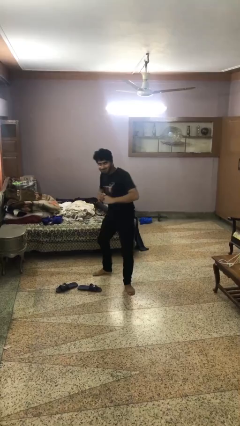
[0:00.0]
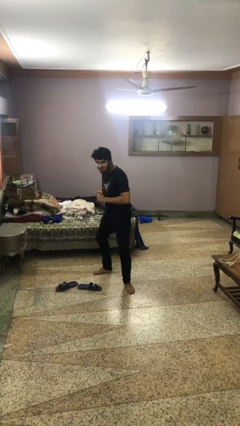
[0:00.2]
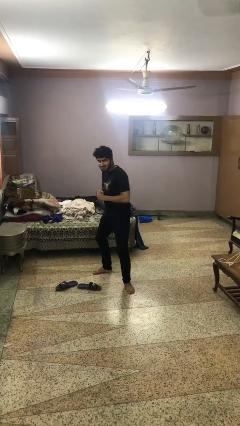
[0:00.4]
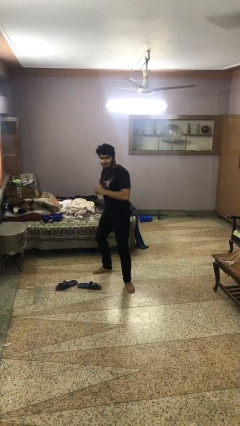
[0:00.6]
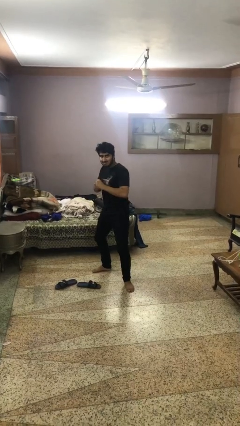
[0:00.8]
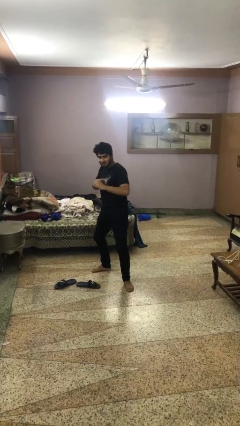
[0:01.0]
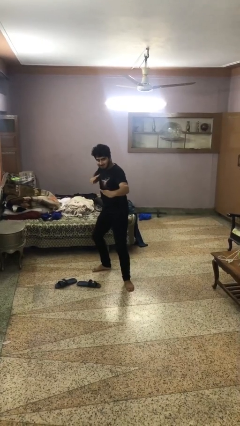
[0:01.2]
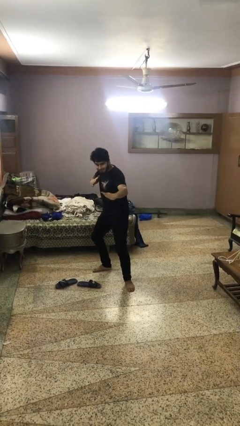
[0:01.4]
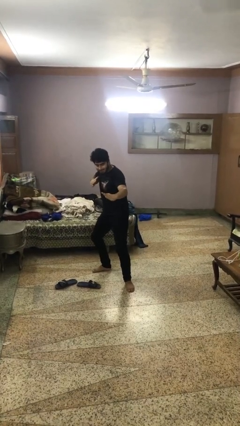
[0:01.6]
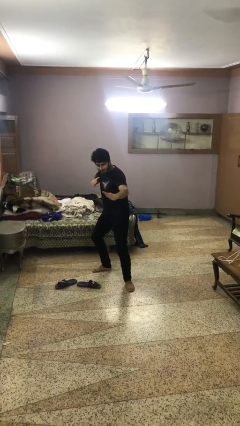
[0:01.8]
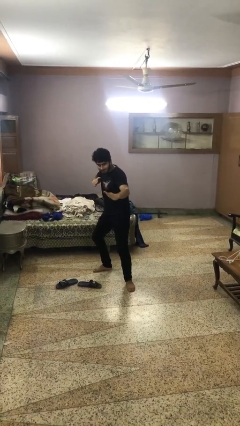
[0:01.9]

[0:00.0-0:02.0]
person karate chop

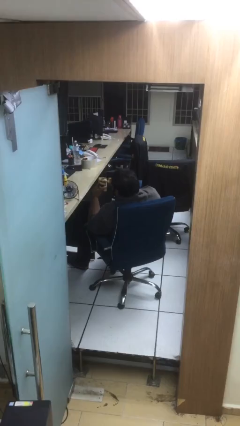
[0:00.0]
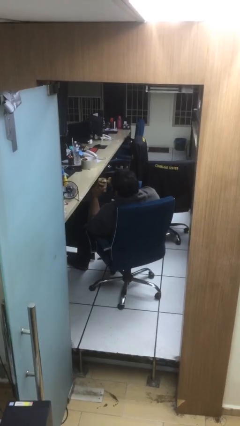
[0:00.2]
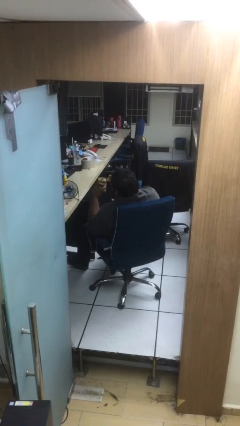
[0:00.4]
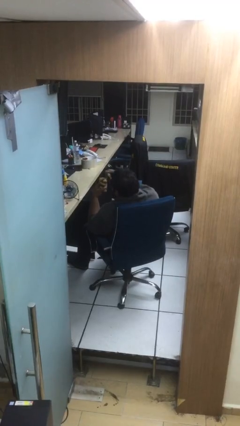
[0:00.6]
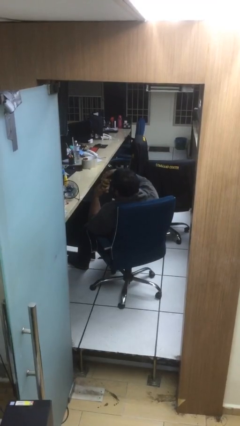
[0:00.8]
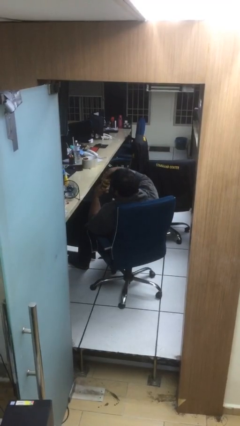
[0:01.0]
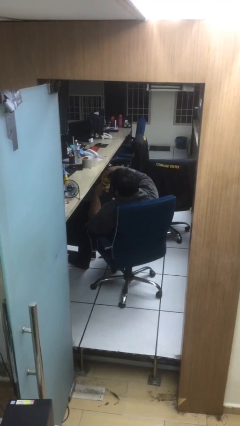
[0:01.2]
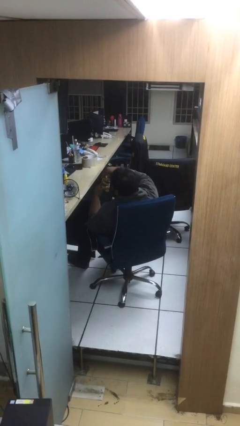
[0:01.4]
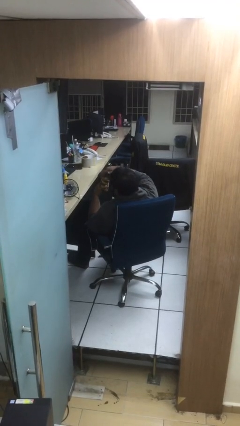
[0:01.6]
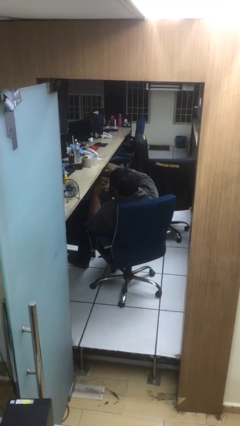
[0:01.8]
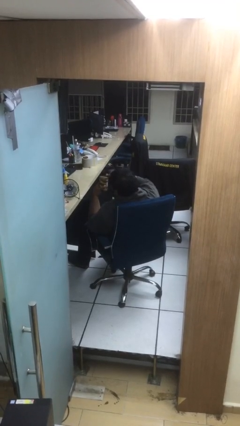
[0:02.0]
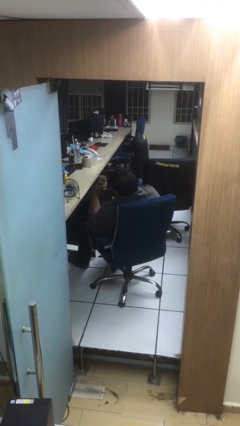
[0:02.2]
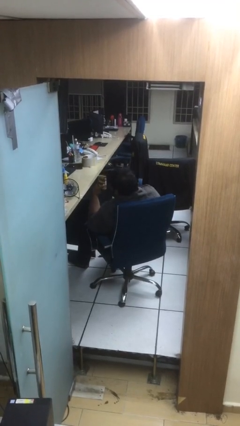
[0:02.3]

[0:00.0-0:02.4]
person closes jar

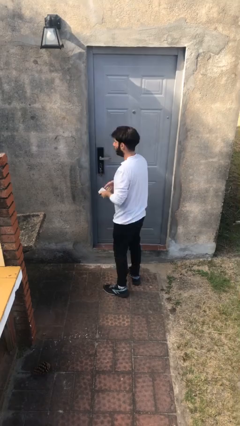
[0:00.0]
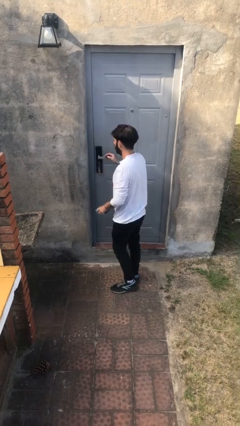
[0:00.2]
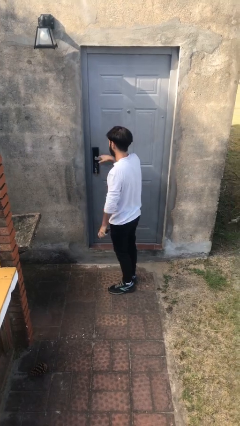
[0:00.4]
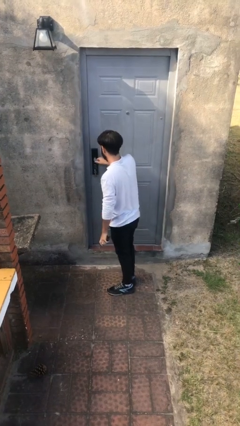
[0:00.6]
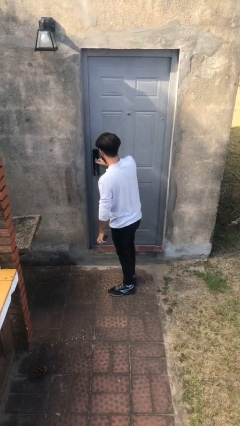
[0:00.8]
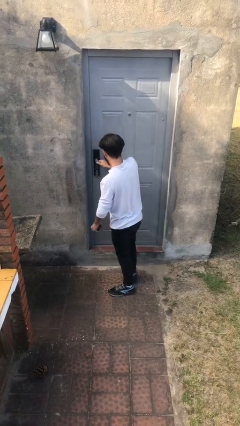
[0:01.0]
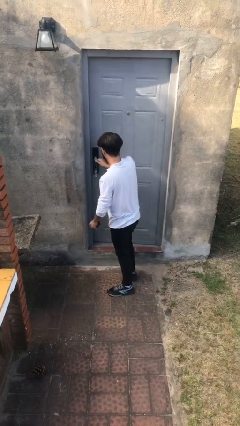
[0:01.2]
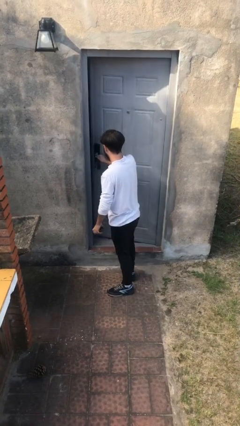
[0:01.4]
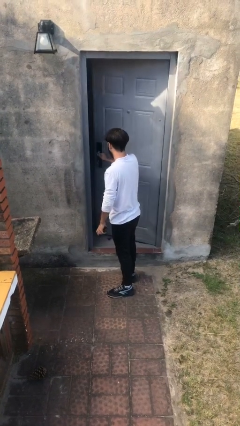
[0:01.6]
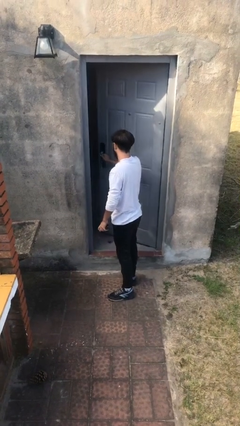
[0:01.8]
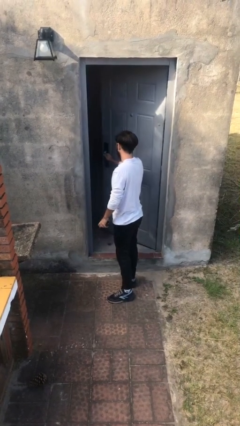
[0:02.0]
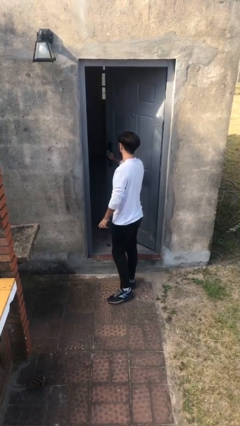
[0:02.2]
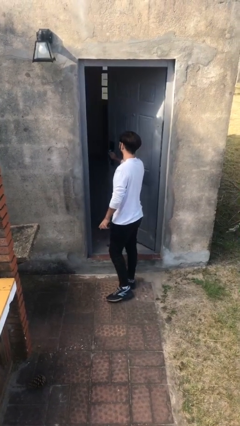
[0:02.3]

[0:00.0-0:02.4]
person opens facility door

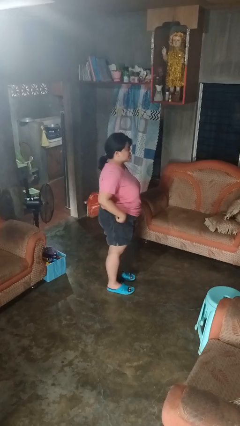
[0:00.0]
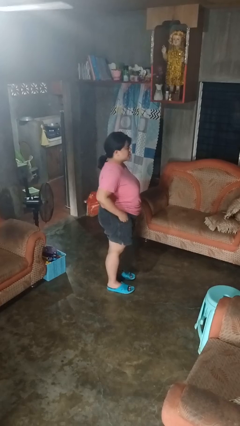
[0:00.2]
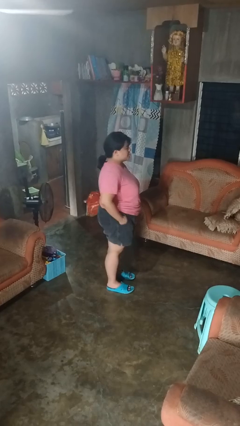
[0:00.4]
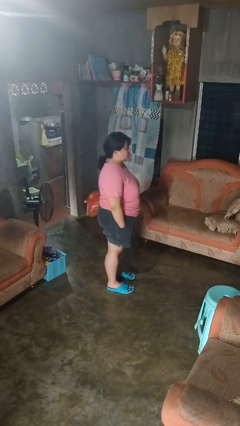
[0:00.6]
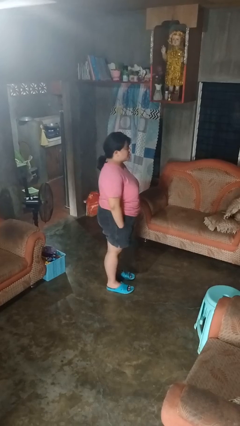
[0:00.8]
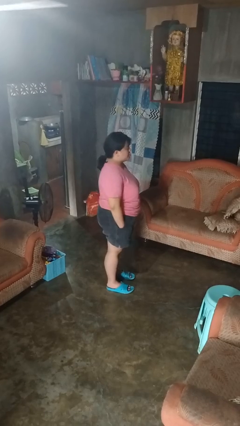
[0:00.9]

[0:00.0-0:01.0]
person puts hands in back pockets

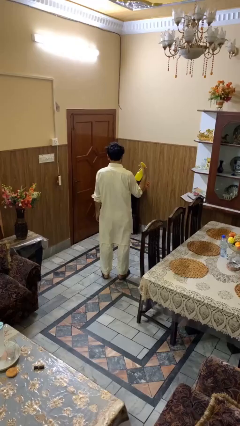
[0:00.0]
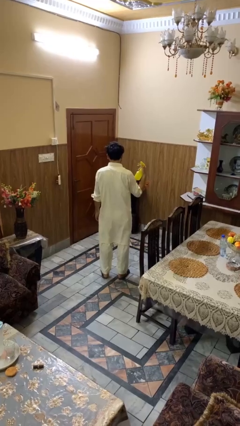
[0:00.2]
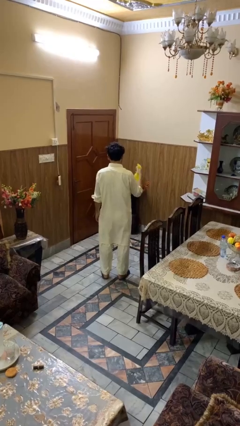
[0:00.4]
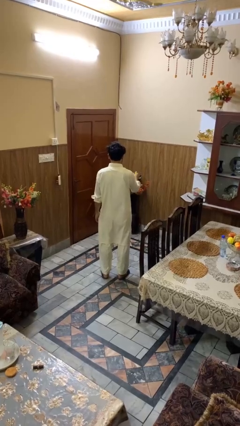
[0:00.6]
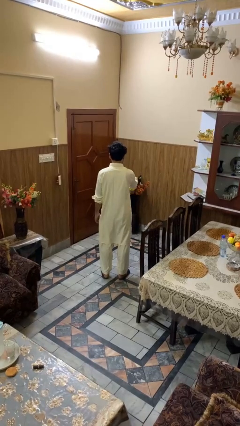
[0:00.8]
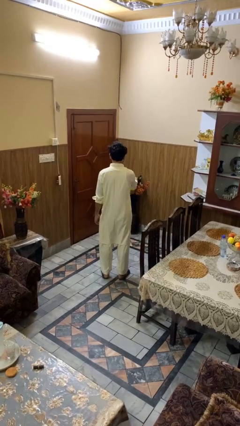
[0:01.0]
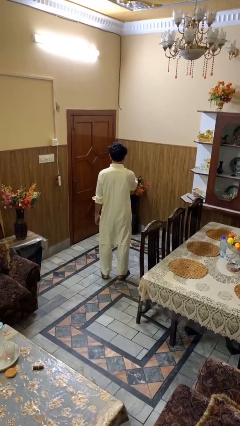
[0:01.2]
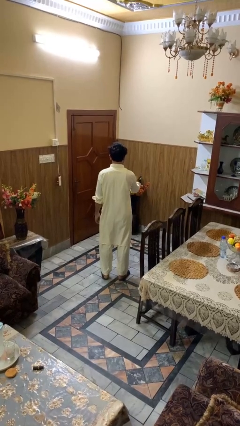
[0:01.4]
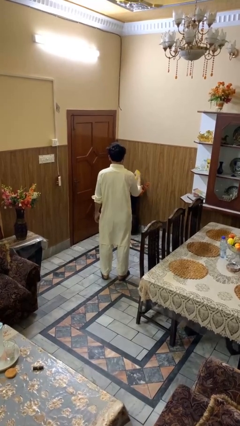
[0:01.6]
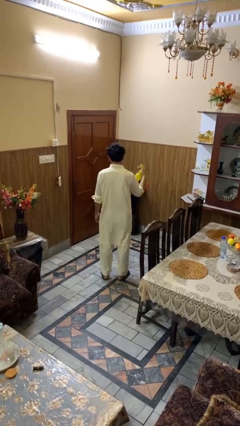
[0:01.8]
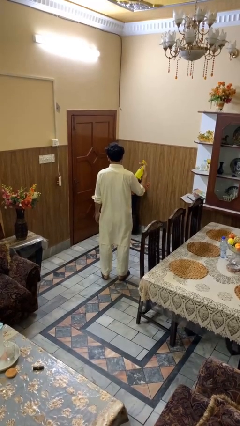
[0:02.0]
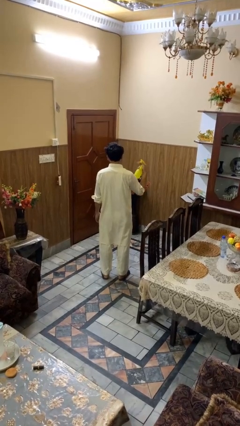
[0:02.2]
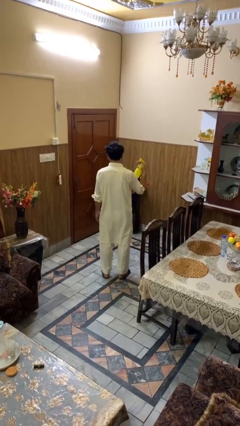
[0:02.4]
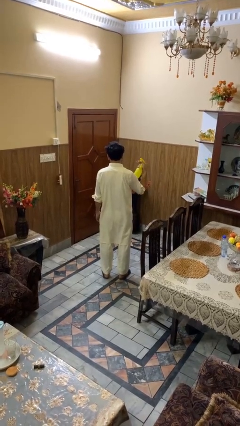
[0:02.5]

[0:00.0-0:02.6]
person sprays from bottle

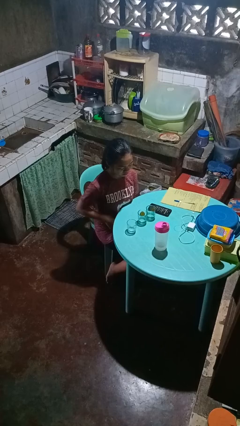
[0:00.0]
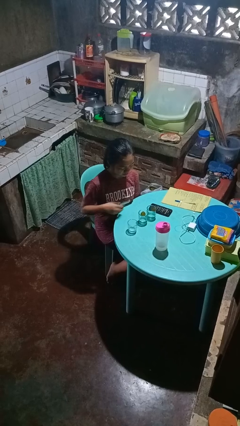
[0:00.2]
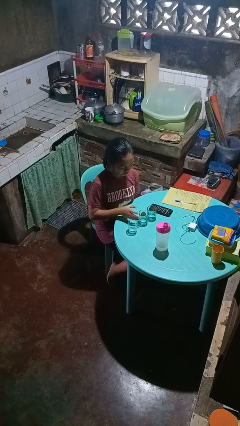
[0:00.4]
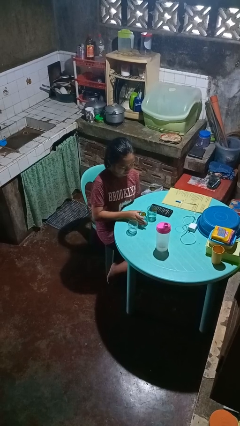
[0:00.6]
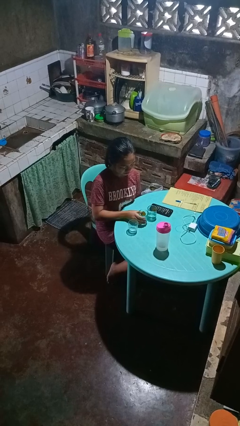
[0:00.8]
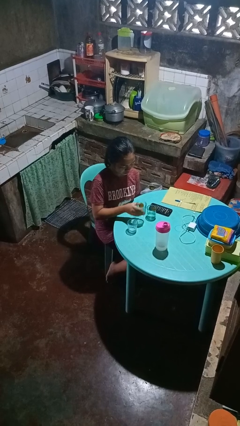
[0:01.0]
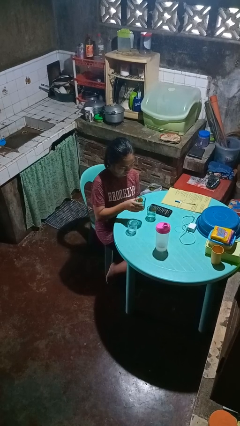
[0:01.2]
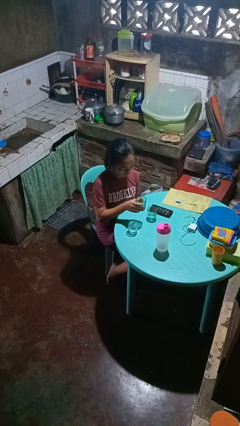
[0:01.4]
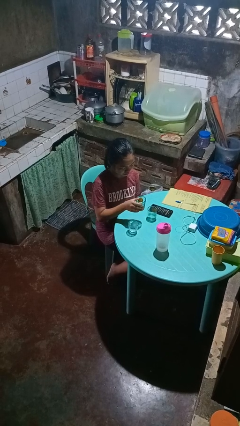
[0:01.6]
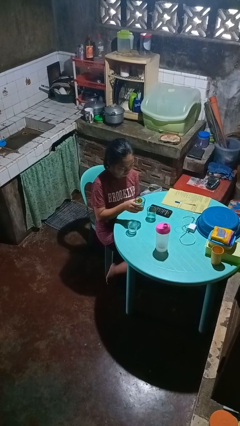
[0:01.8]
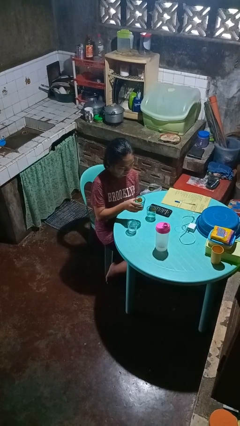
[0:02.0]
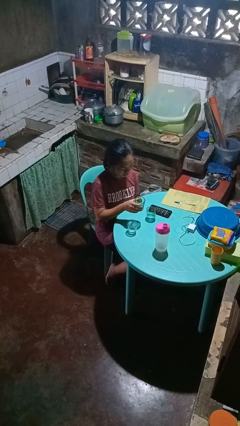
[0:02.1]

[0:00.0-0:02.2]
person picks up object from table

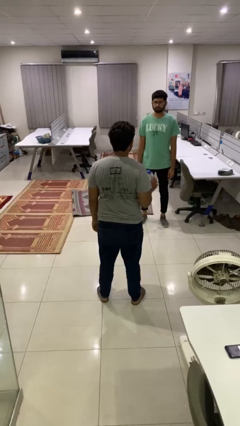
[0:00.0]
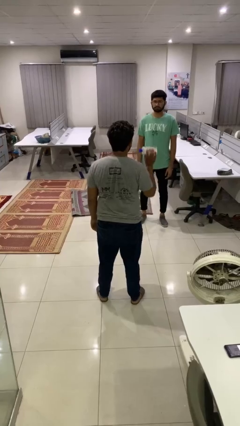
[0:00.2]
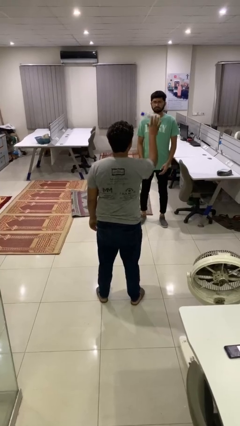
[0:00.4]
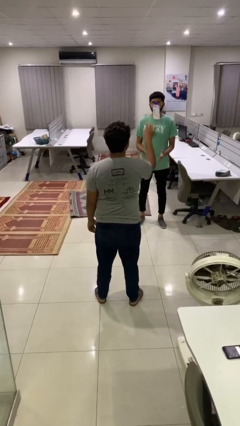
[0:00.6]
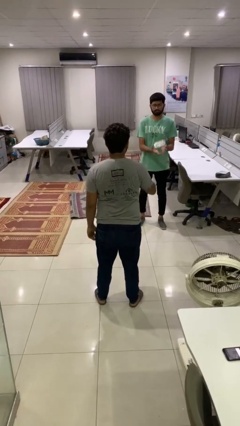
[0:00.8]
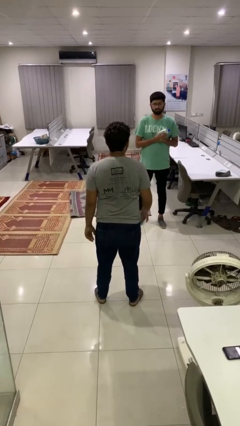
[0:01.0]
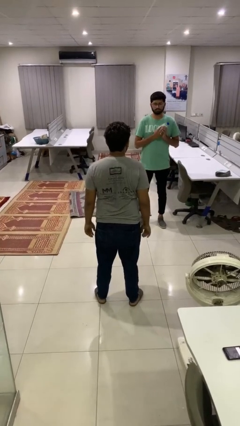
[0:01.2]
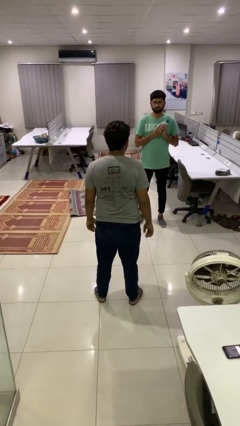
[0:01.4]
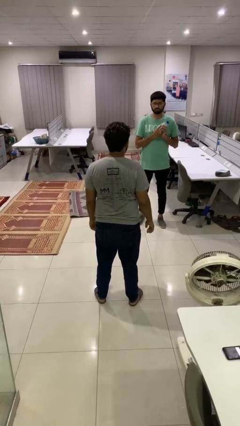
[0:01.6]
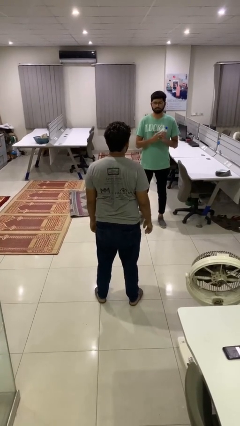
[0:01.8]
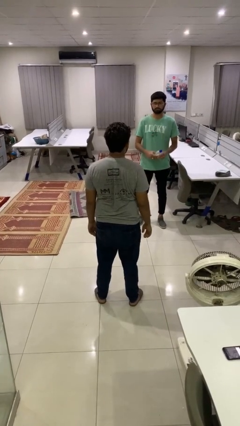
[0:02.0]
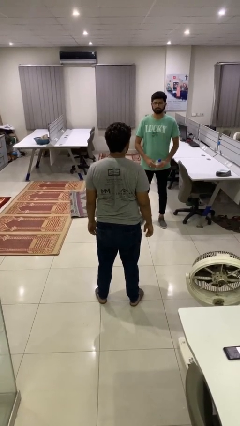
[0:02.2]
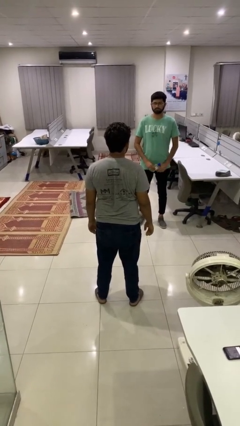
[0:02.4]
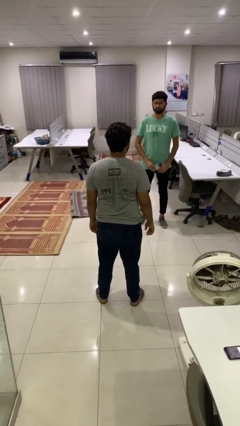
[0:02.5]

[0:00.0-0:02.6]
person throws object to person

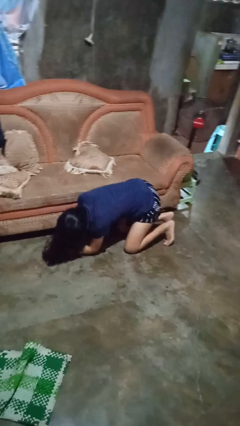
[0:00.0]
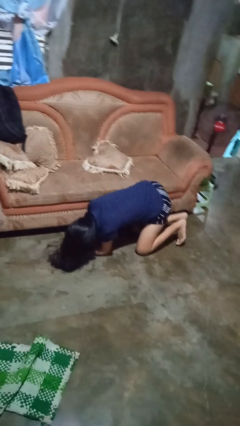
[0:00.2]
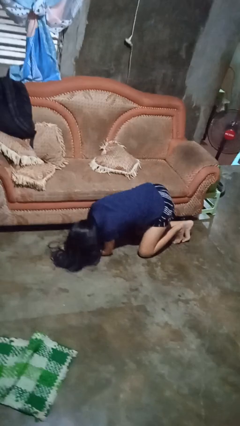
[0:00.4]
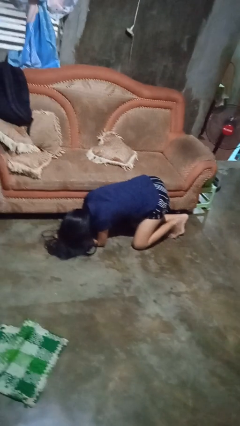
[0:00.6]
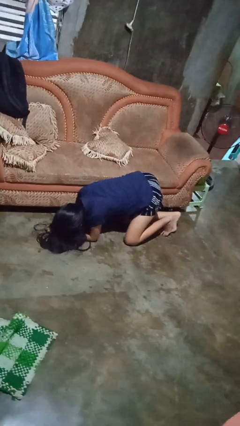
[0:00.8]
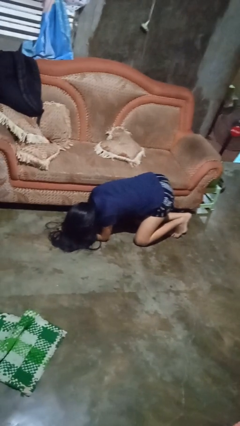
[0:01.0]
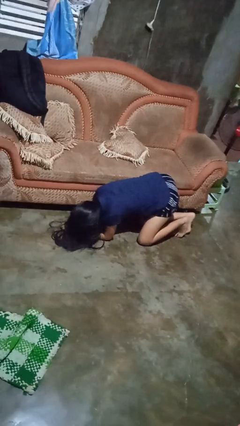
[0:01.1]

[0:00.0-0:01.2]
person searches under couch

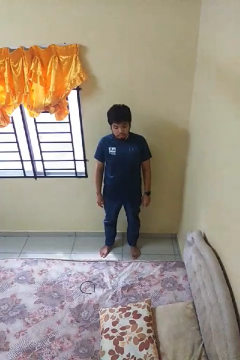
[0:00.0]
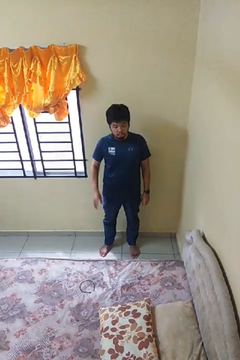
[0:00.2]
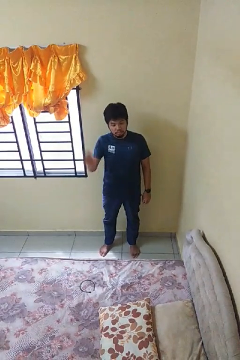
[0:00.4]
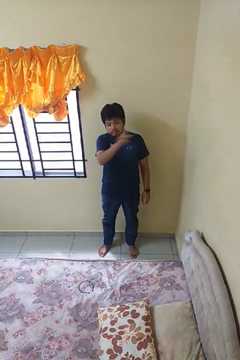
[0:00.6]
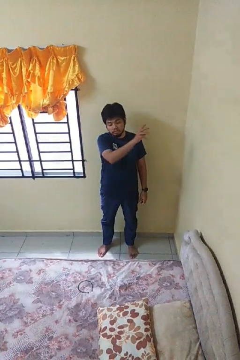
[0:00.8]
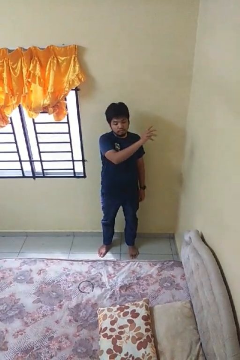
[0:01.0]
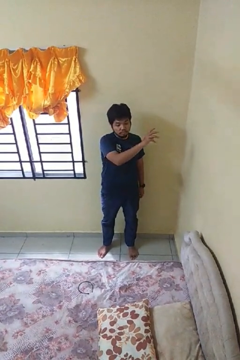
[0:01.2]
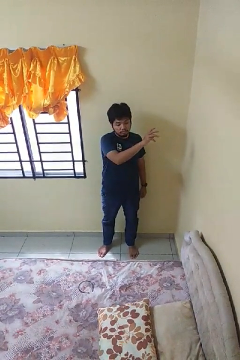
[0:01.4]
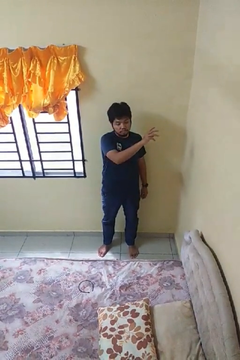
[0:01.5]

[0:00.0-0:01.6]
person gestures swipe left
